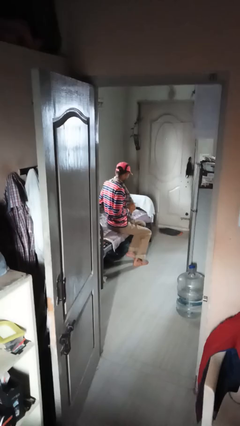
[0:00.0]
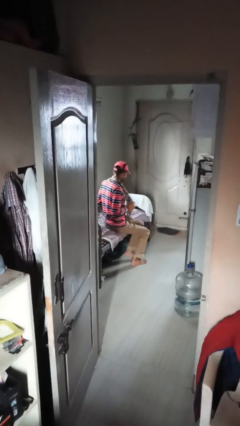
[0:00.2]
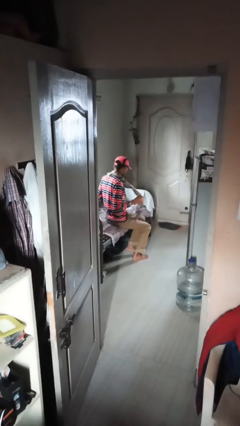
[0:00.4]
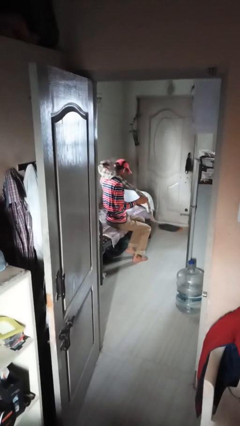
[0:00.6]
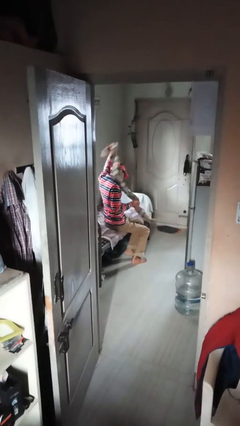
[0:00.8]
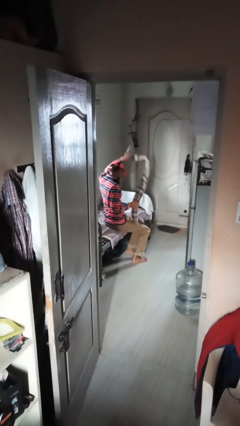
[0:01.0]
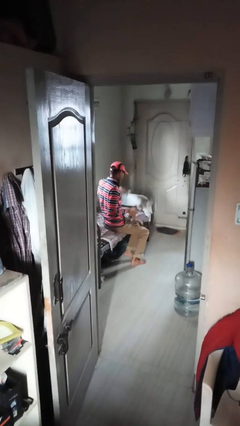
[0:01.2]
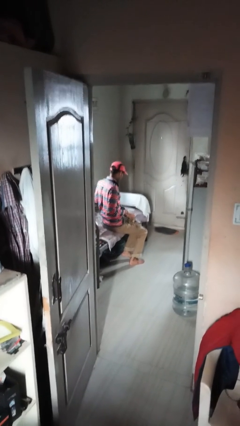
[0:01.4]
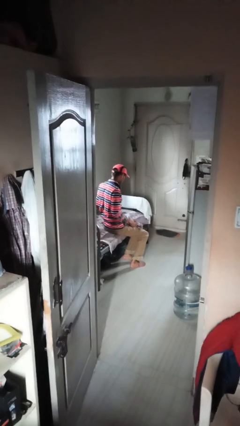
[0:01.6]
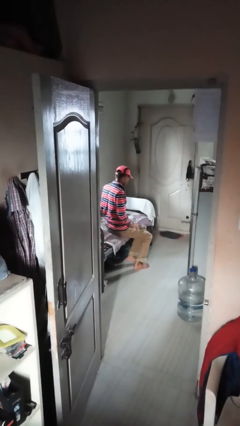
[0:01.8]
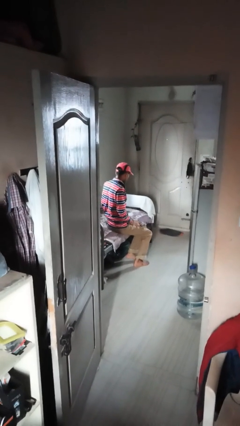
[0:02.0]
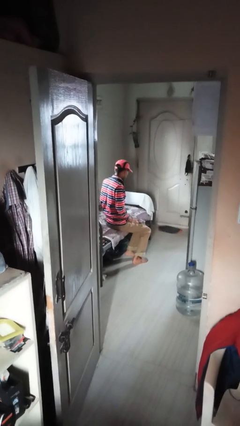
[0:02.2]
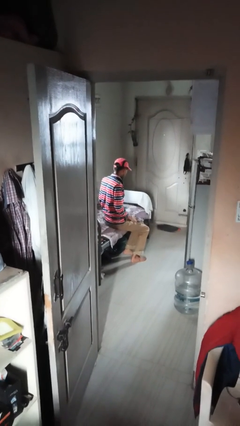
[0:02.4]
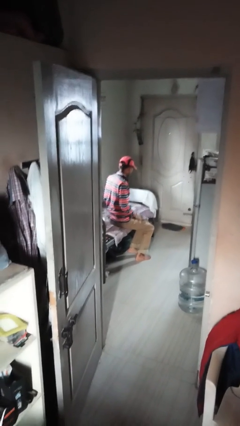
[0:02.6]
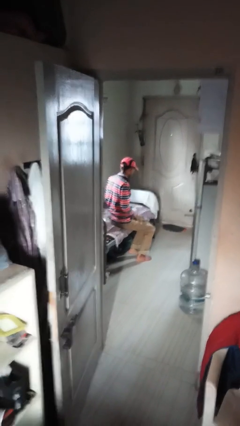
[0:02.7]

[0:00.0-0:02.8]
person takes off scarf

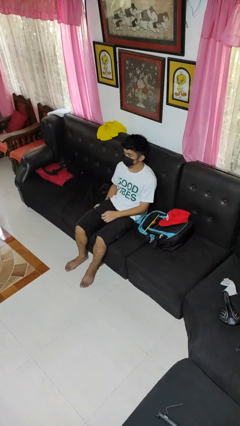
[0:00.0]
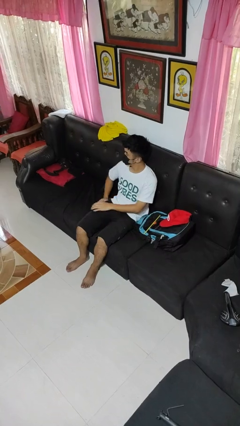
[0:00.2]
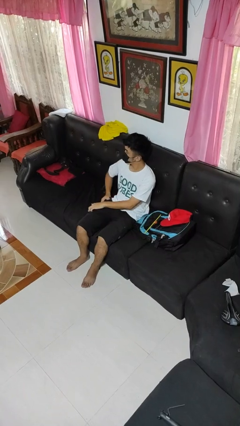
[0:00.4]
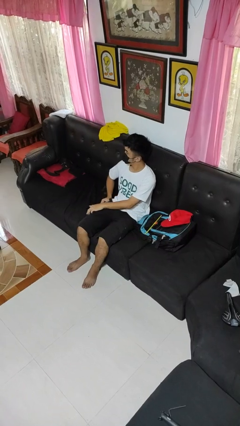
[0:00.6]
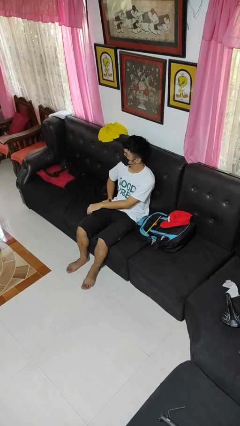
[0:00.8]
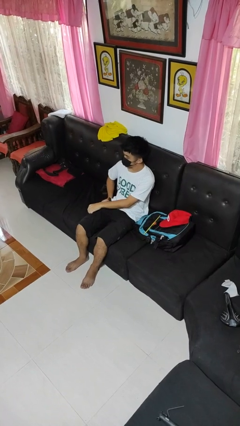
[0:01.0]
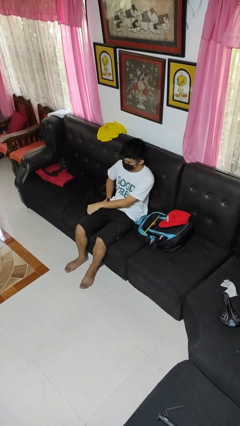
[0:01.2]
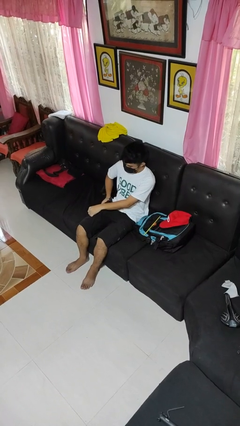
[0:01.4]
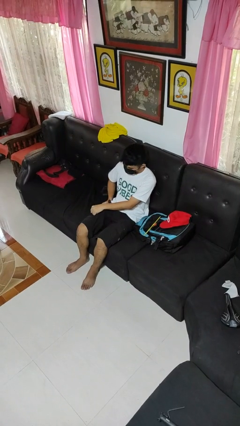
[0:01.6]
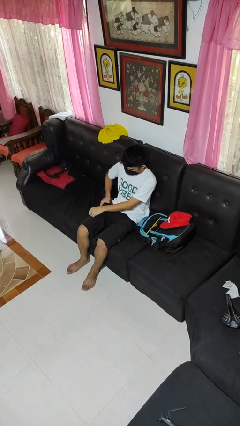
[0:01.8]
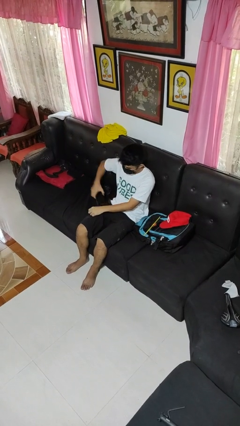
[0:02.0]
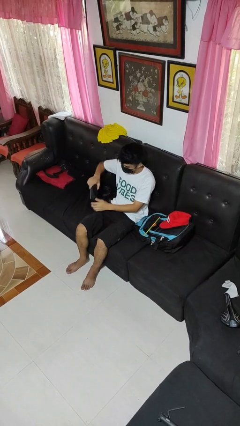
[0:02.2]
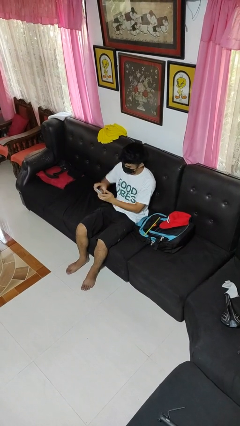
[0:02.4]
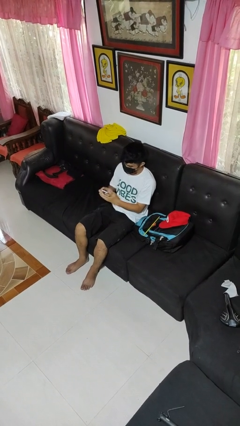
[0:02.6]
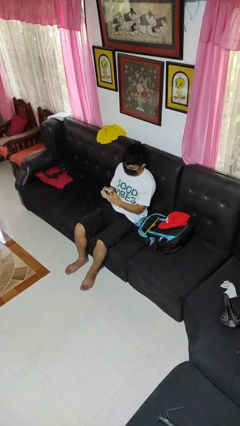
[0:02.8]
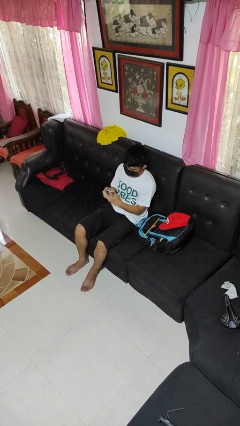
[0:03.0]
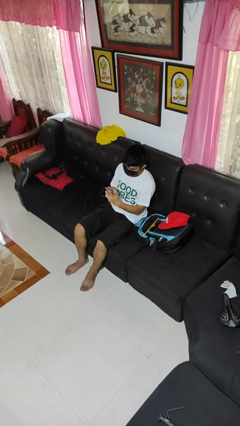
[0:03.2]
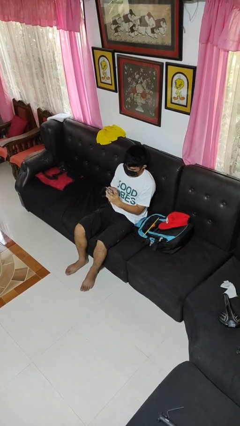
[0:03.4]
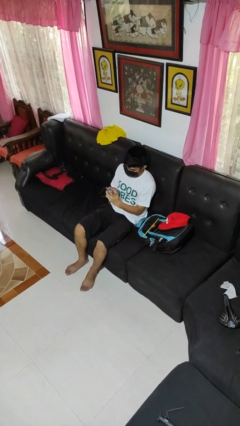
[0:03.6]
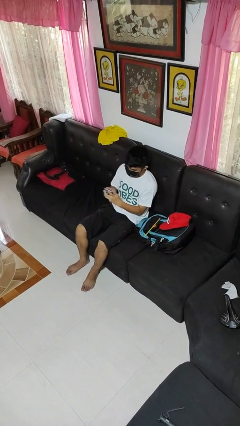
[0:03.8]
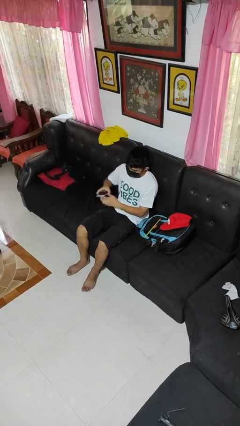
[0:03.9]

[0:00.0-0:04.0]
person takes phone from pocket

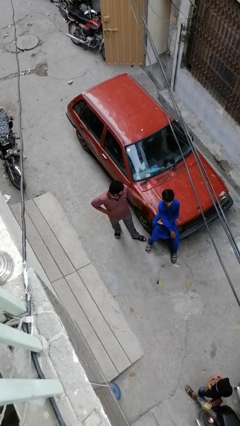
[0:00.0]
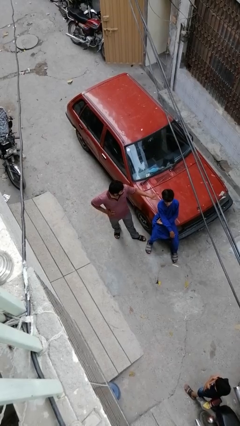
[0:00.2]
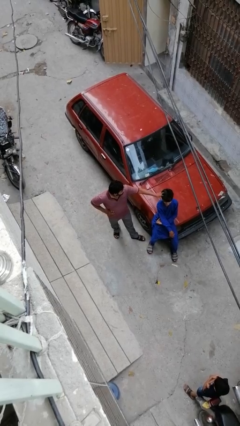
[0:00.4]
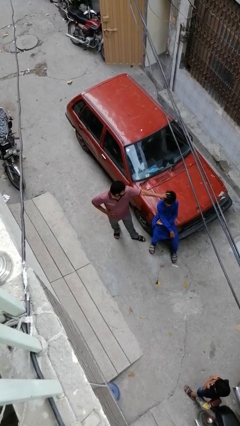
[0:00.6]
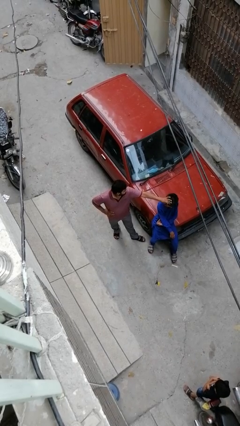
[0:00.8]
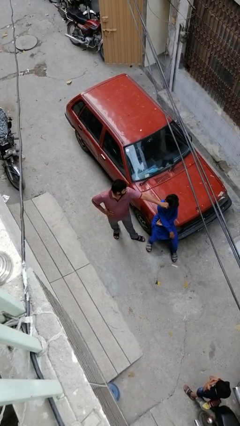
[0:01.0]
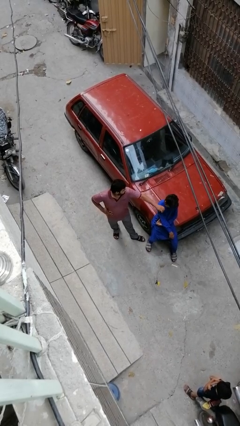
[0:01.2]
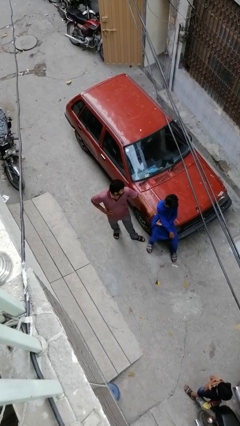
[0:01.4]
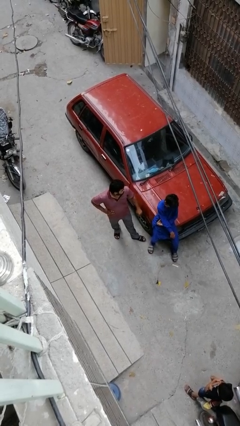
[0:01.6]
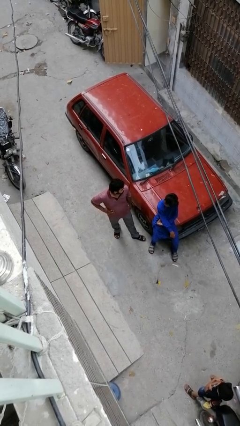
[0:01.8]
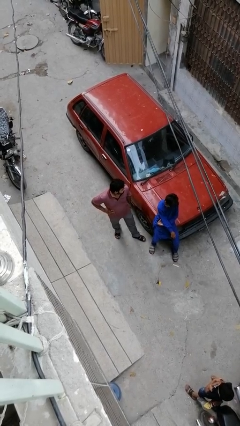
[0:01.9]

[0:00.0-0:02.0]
person grabs person by hair

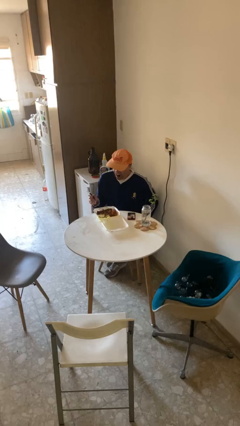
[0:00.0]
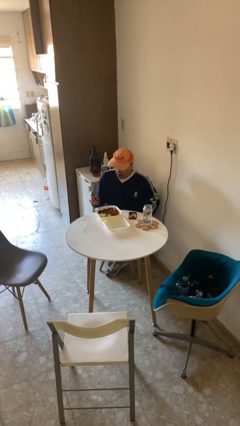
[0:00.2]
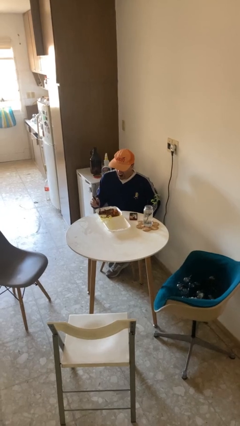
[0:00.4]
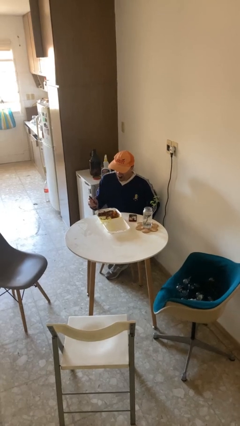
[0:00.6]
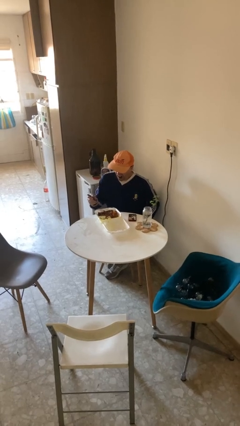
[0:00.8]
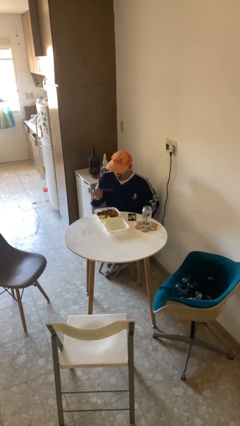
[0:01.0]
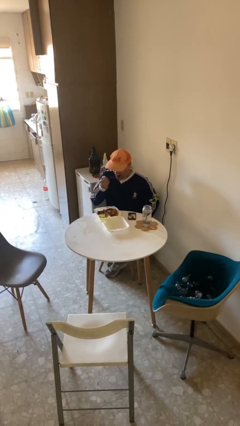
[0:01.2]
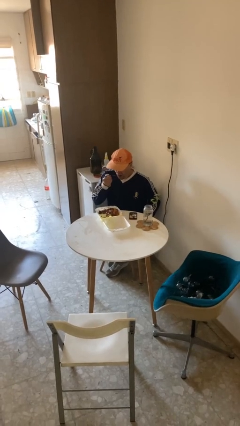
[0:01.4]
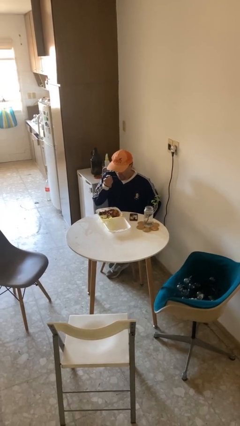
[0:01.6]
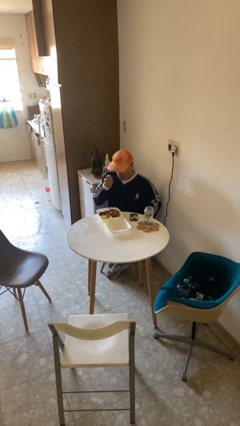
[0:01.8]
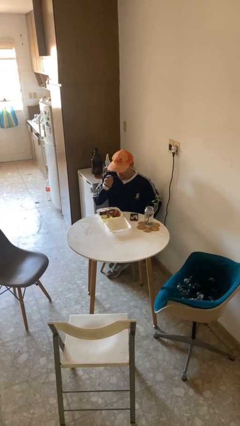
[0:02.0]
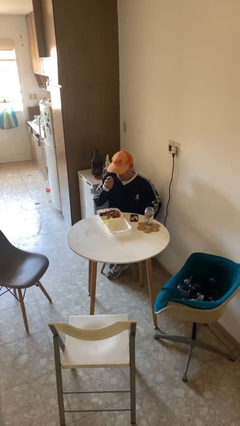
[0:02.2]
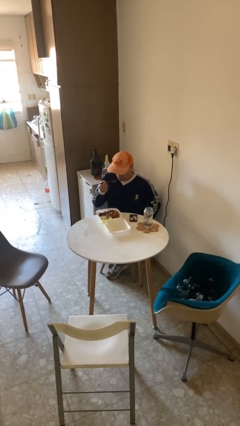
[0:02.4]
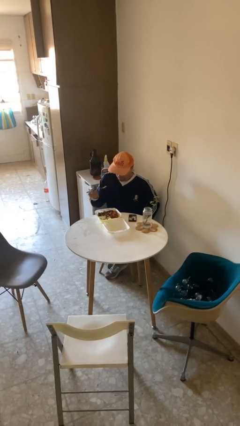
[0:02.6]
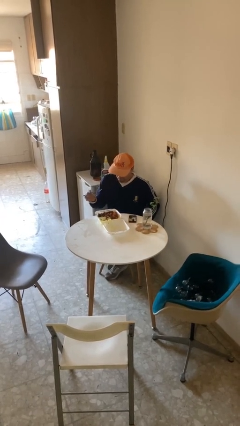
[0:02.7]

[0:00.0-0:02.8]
person eats with utensil

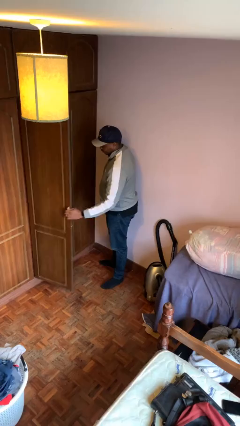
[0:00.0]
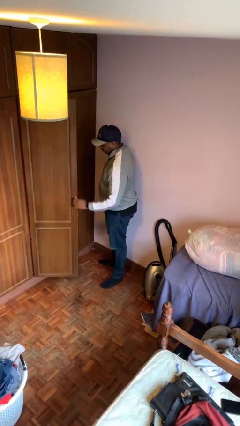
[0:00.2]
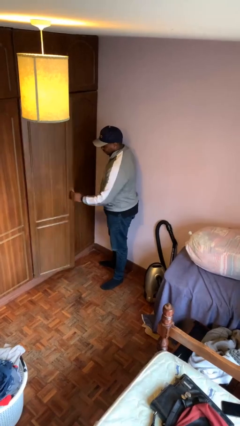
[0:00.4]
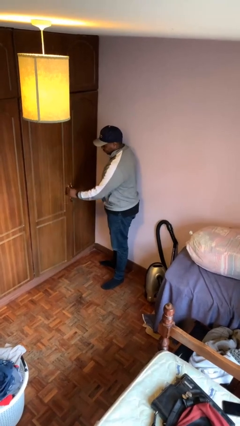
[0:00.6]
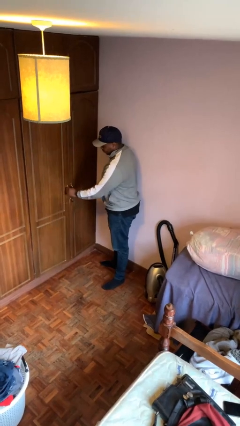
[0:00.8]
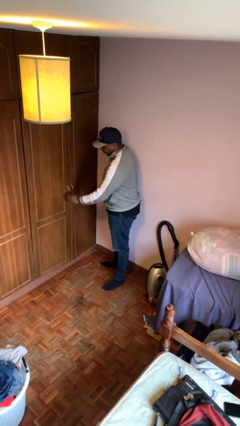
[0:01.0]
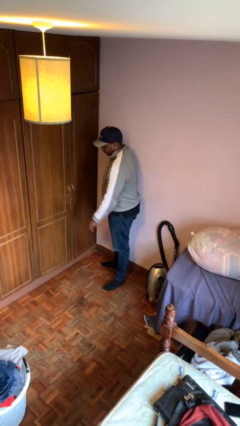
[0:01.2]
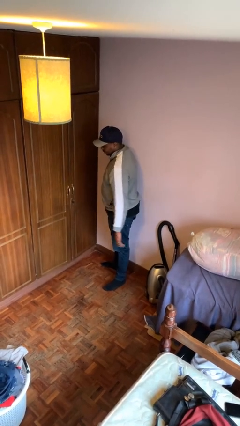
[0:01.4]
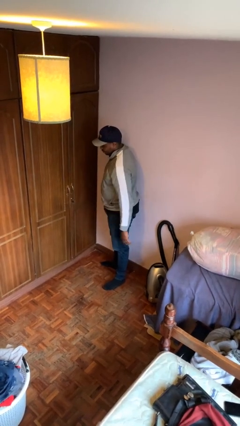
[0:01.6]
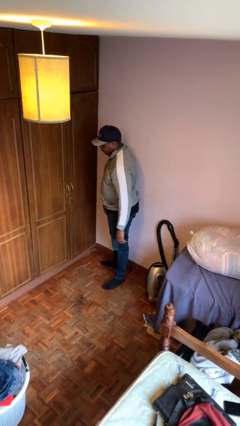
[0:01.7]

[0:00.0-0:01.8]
person closes closet door

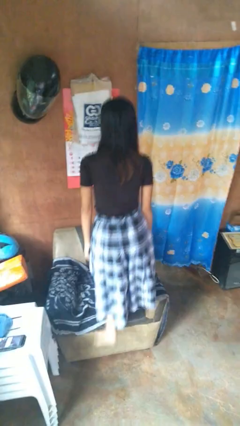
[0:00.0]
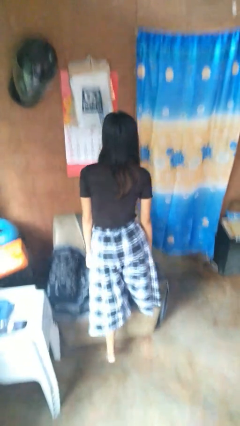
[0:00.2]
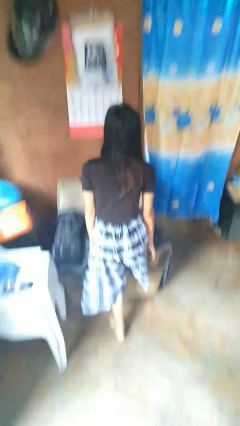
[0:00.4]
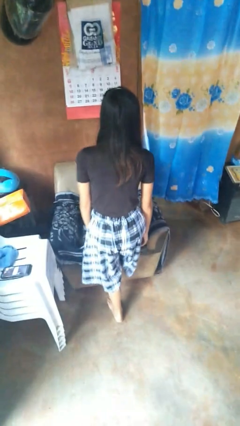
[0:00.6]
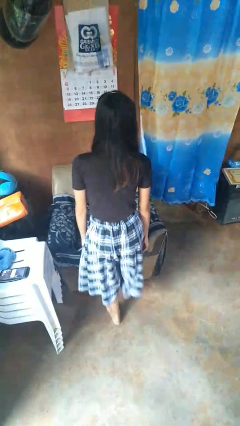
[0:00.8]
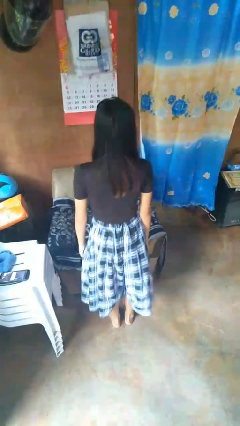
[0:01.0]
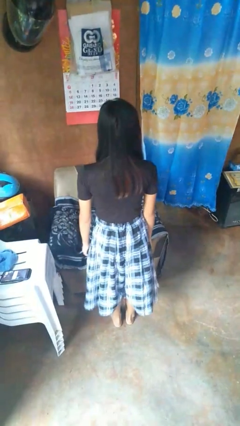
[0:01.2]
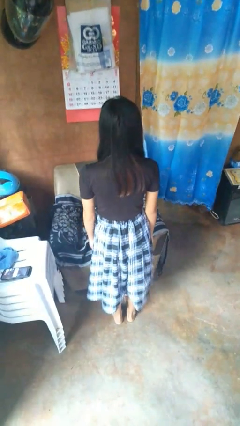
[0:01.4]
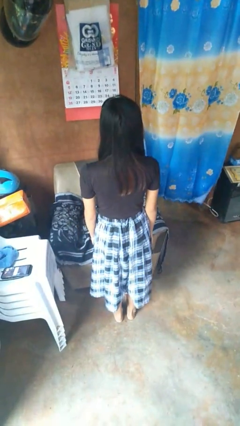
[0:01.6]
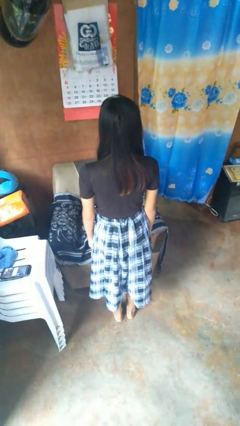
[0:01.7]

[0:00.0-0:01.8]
person climbs off couch

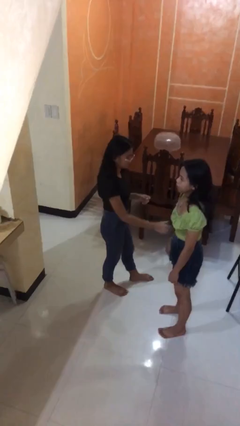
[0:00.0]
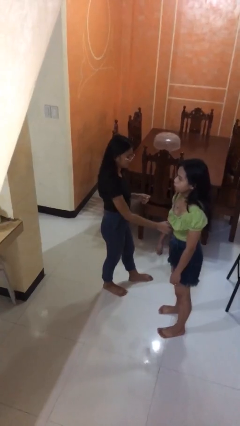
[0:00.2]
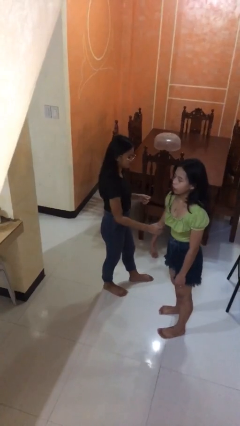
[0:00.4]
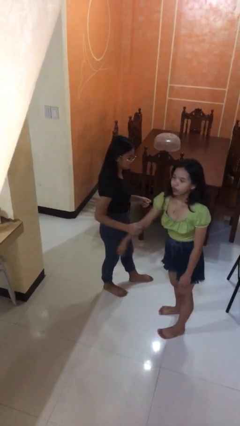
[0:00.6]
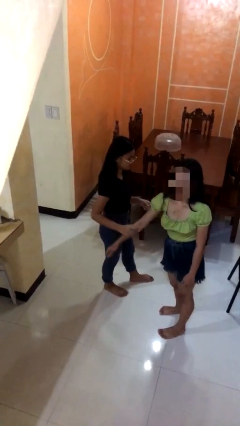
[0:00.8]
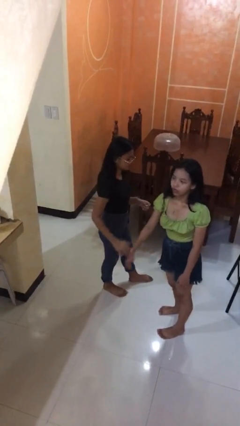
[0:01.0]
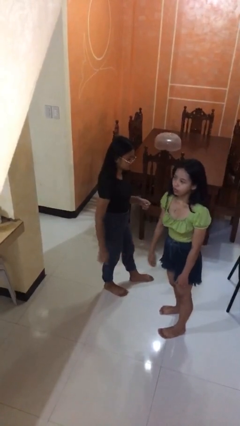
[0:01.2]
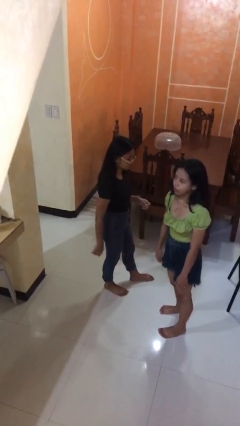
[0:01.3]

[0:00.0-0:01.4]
person grabs person by forearm

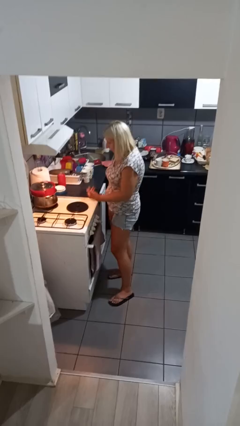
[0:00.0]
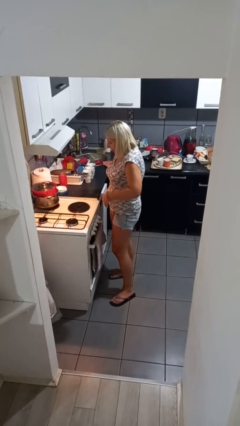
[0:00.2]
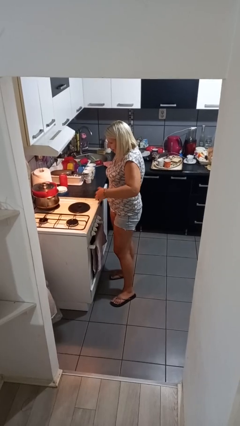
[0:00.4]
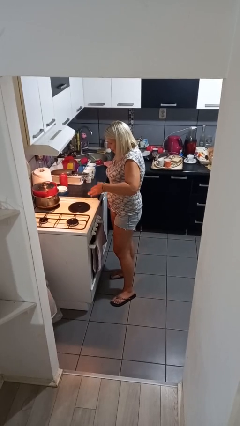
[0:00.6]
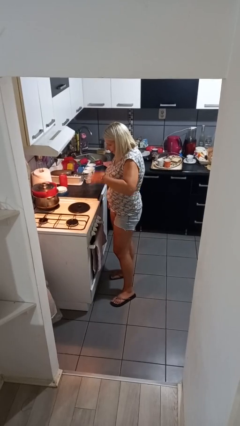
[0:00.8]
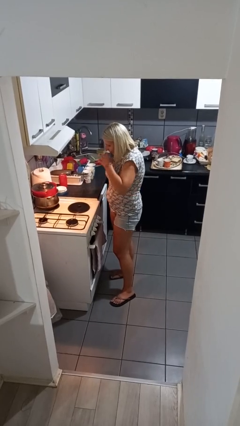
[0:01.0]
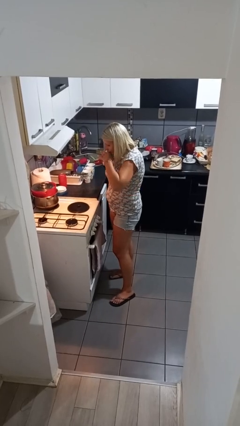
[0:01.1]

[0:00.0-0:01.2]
person burns hand
